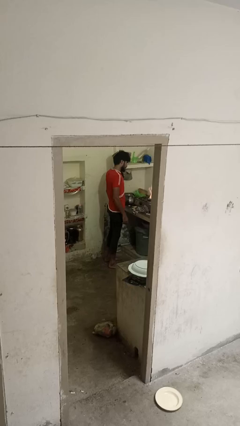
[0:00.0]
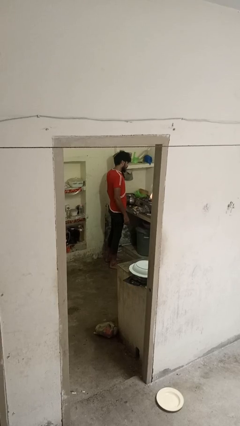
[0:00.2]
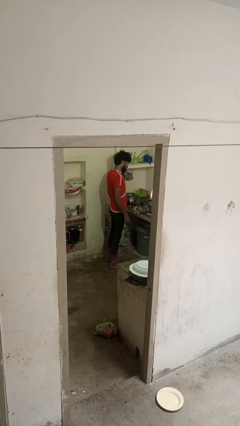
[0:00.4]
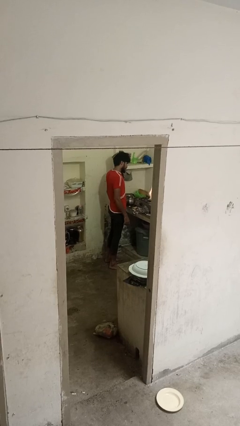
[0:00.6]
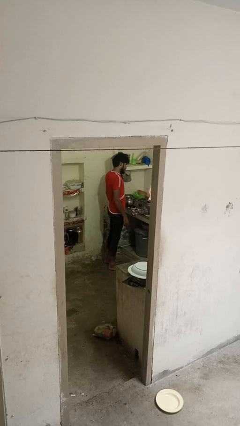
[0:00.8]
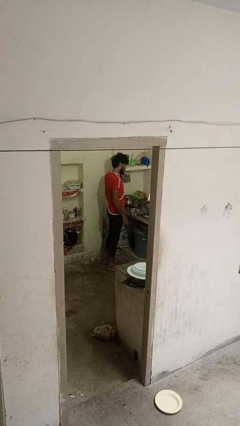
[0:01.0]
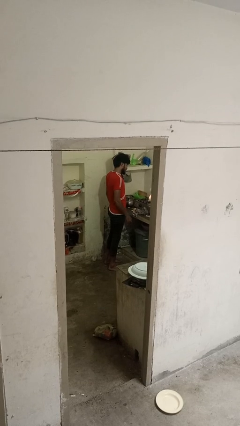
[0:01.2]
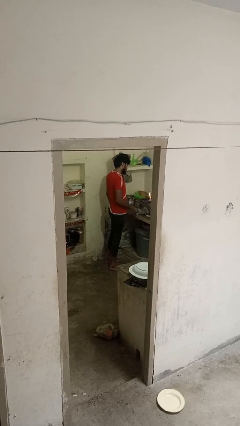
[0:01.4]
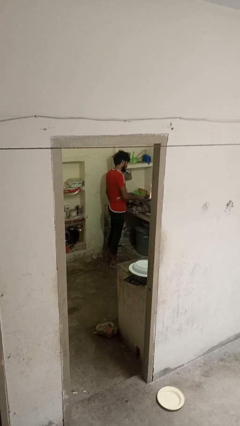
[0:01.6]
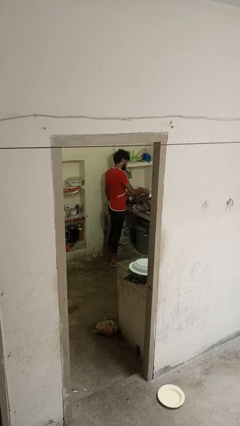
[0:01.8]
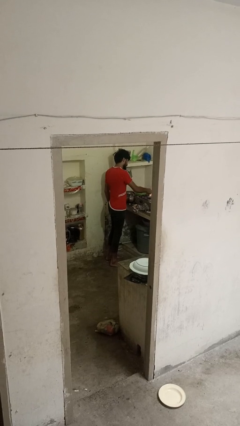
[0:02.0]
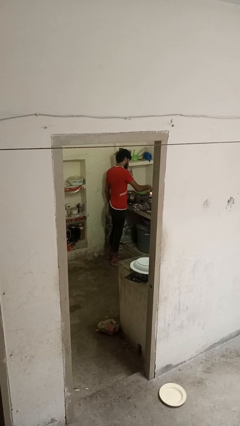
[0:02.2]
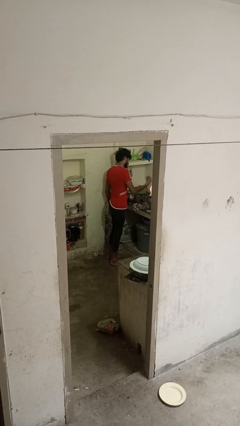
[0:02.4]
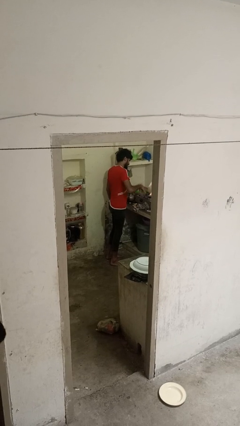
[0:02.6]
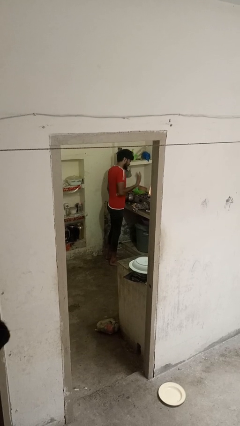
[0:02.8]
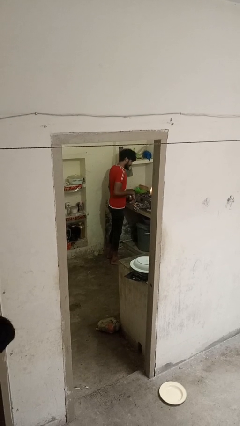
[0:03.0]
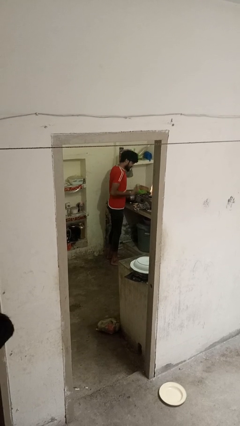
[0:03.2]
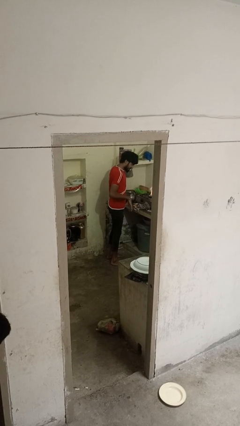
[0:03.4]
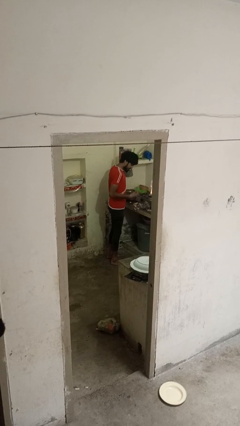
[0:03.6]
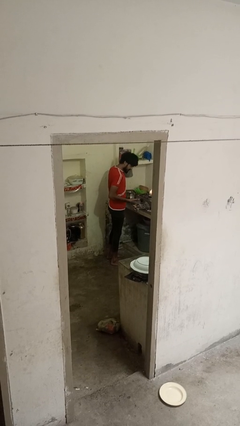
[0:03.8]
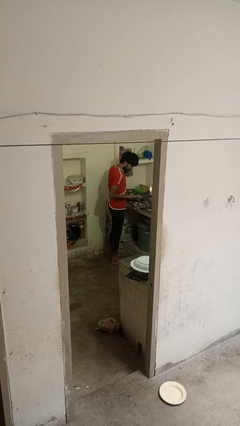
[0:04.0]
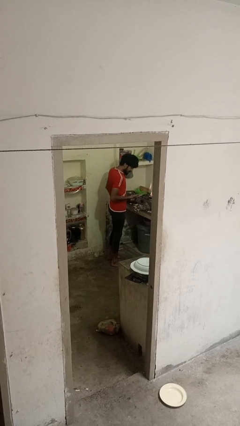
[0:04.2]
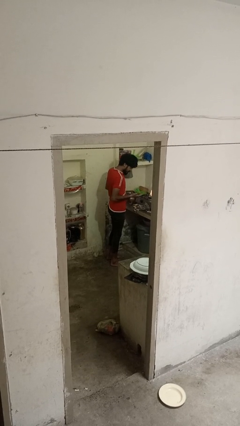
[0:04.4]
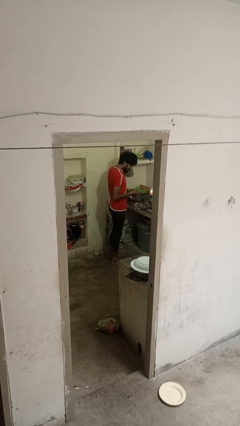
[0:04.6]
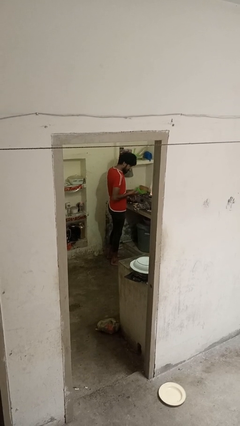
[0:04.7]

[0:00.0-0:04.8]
person burns hand

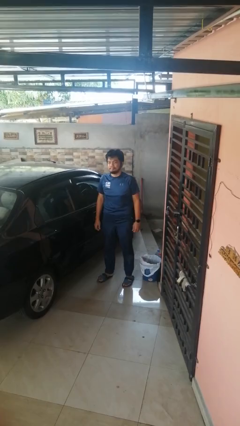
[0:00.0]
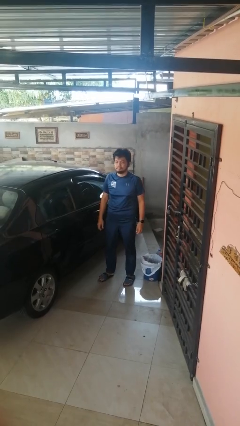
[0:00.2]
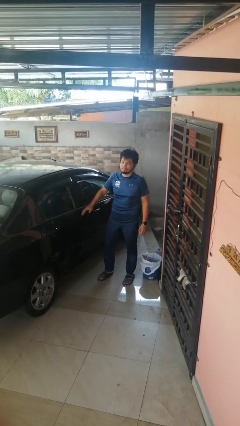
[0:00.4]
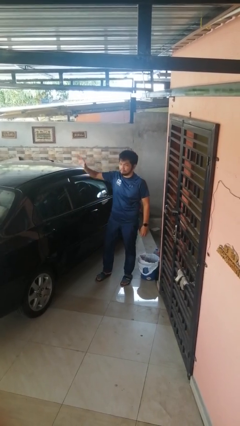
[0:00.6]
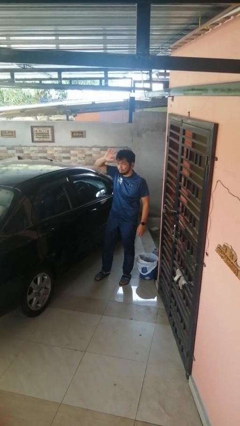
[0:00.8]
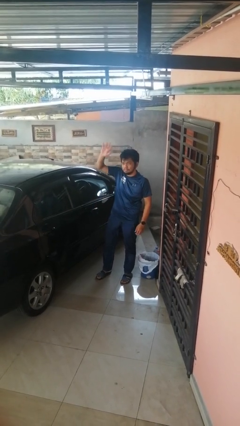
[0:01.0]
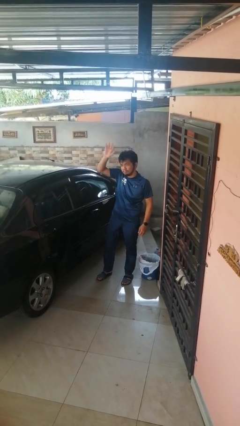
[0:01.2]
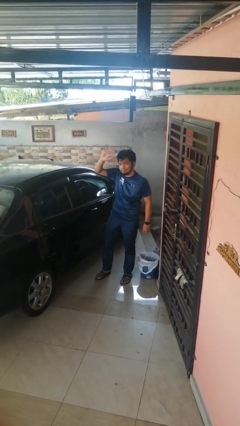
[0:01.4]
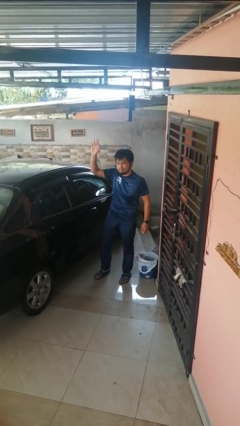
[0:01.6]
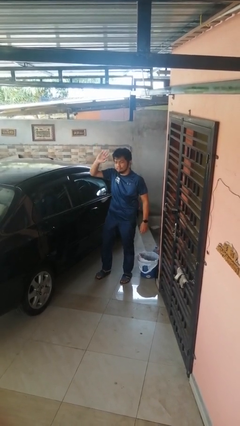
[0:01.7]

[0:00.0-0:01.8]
person waves at person

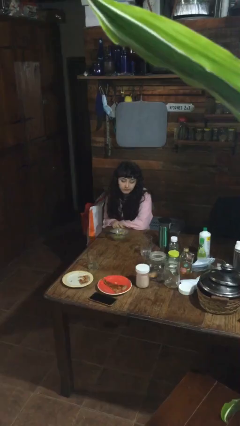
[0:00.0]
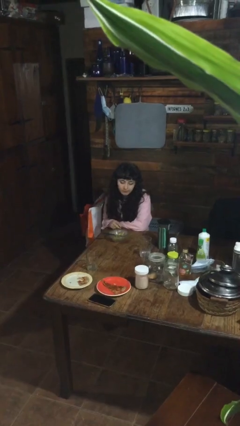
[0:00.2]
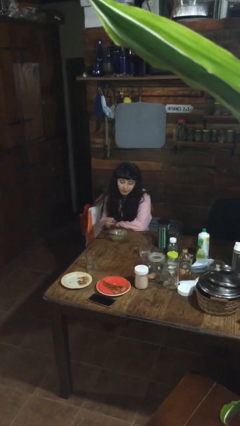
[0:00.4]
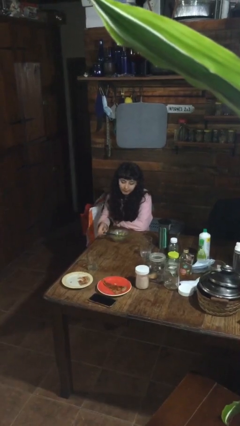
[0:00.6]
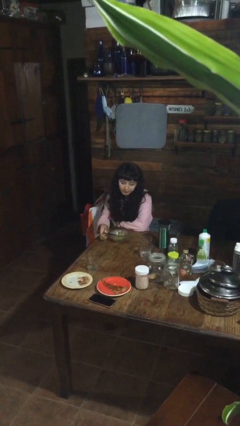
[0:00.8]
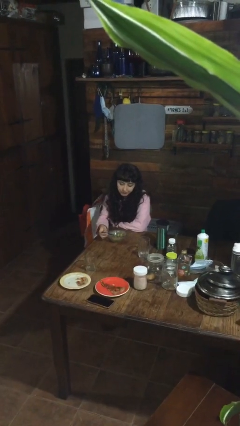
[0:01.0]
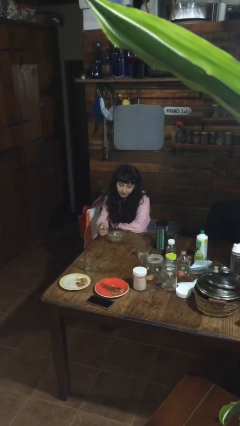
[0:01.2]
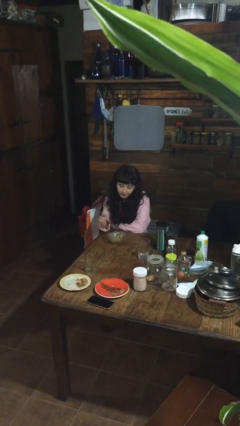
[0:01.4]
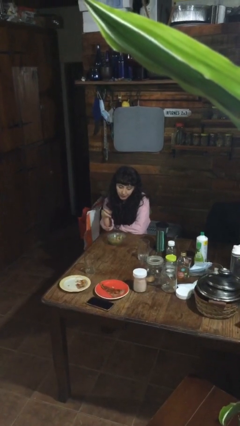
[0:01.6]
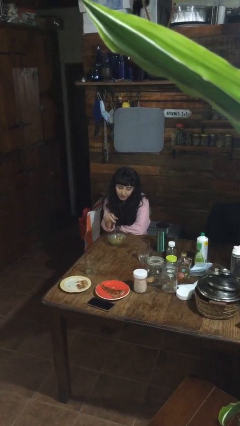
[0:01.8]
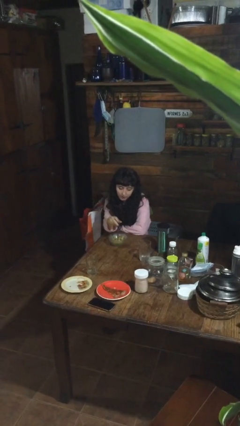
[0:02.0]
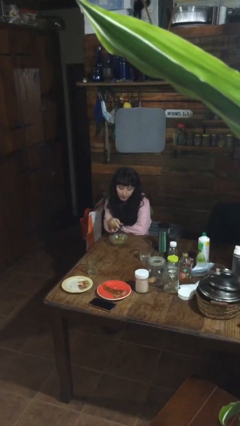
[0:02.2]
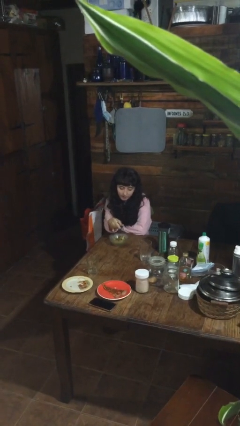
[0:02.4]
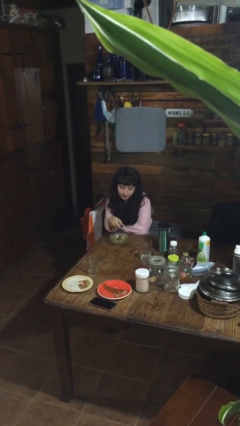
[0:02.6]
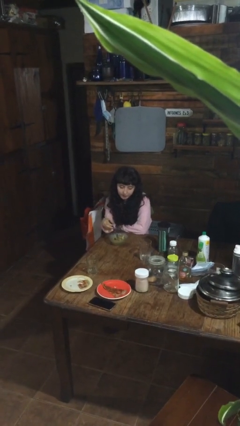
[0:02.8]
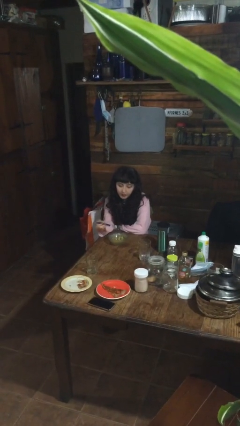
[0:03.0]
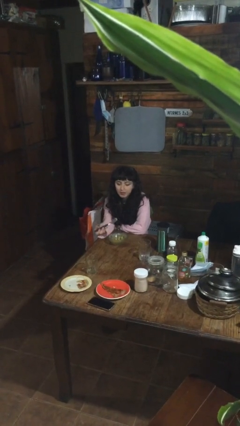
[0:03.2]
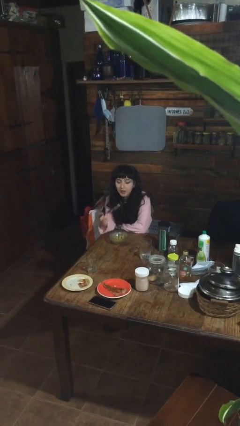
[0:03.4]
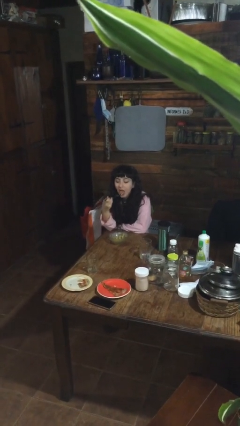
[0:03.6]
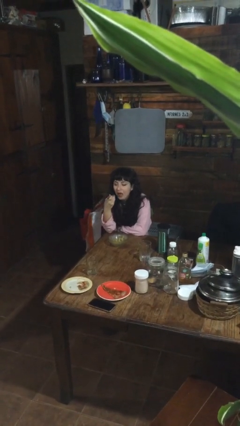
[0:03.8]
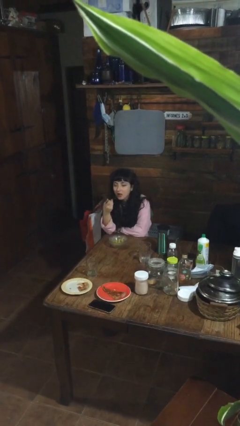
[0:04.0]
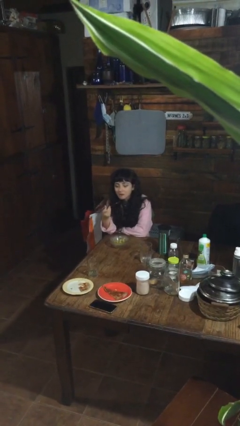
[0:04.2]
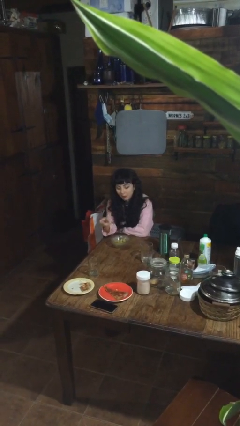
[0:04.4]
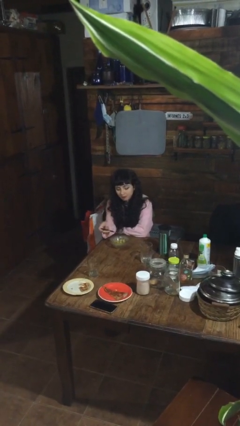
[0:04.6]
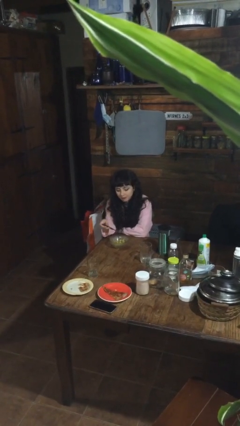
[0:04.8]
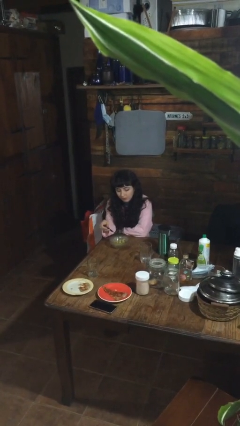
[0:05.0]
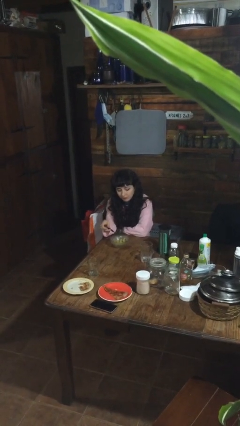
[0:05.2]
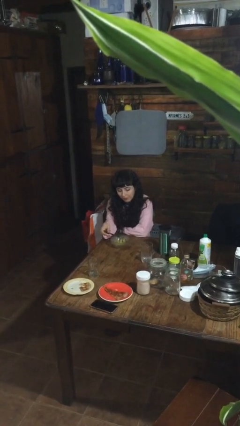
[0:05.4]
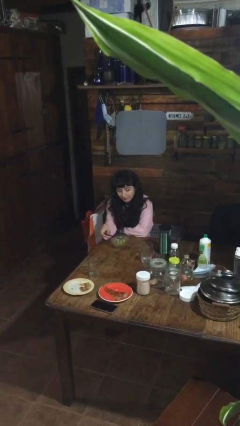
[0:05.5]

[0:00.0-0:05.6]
person eats with utensil

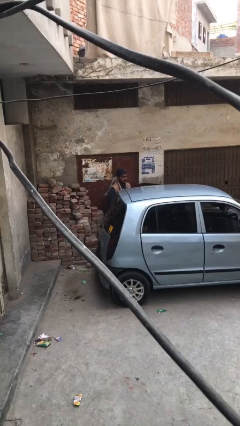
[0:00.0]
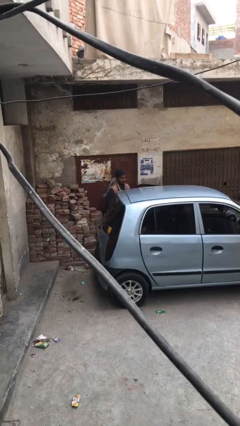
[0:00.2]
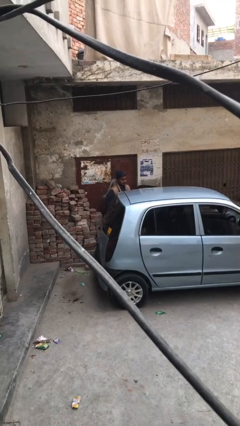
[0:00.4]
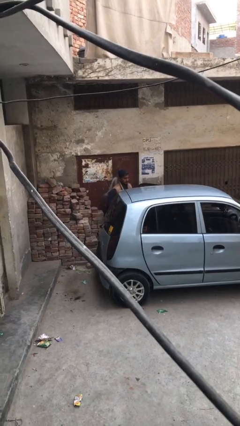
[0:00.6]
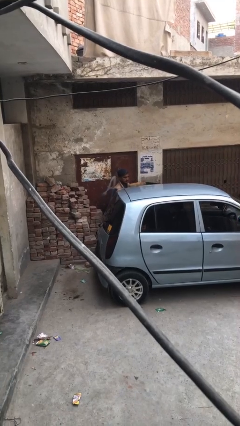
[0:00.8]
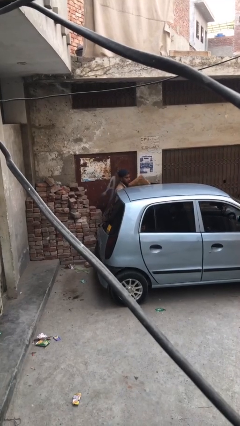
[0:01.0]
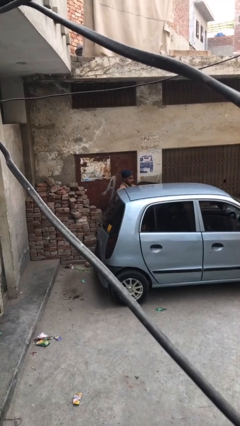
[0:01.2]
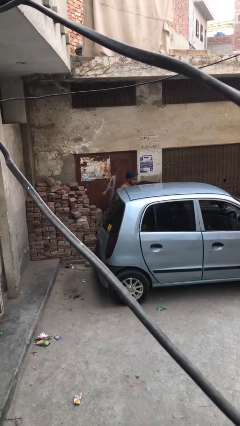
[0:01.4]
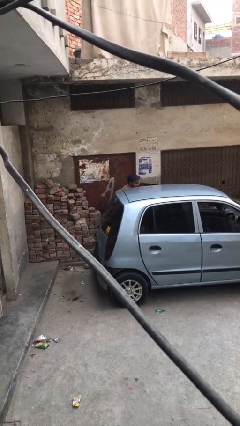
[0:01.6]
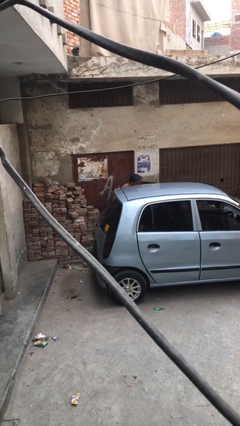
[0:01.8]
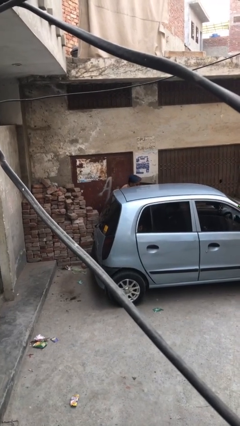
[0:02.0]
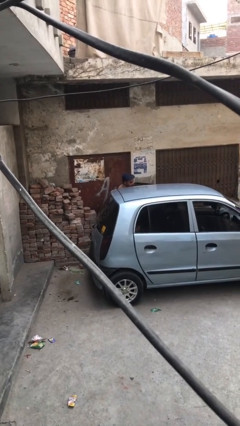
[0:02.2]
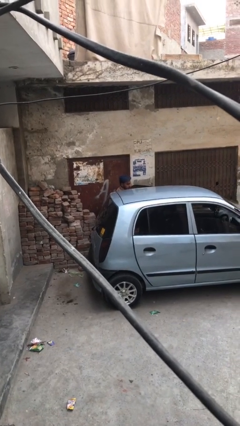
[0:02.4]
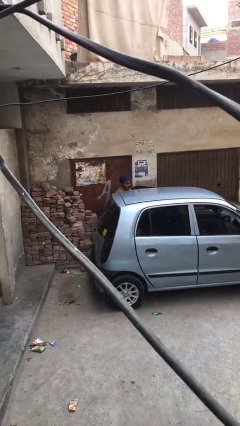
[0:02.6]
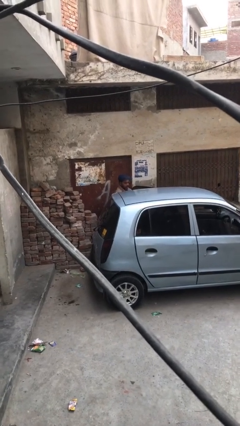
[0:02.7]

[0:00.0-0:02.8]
person loads car

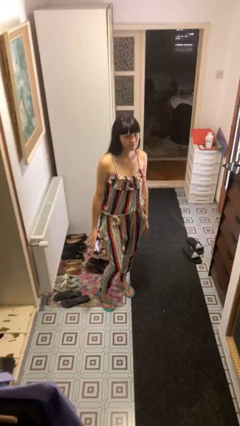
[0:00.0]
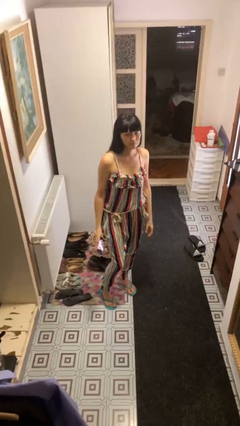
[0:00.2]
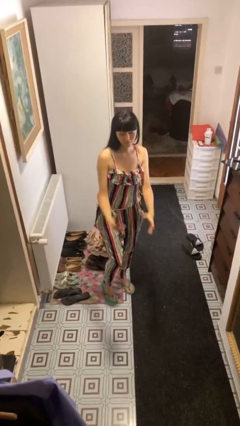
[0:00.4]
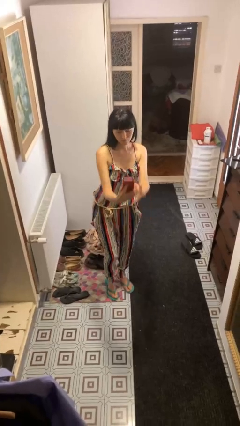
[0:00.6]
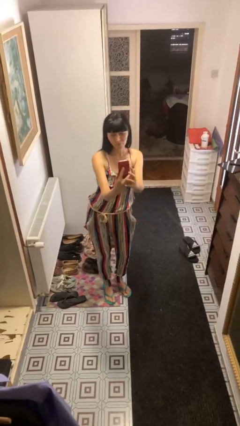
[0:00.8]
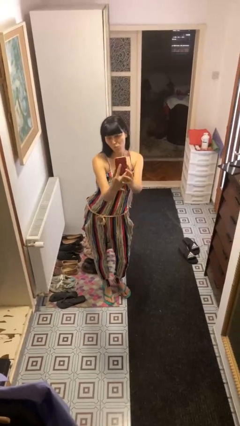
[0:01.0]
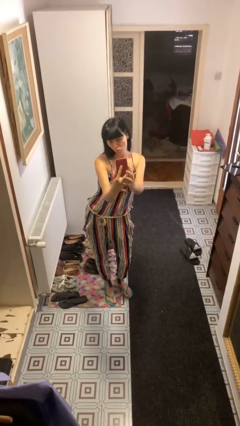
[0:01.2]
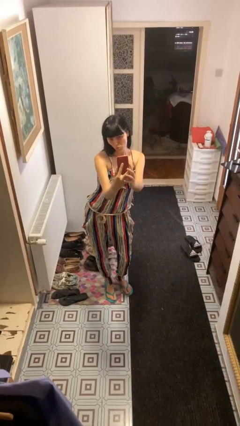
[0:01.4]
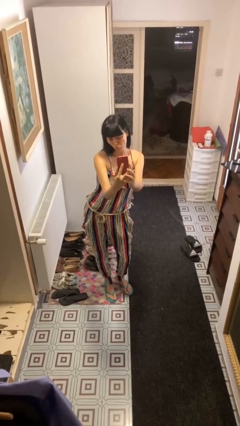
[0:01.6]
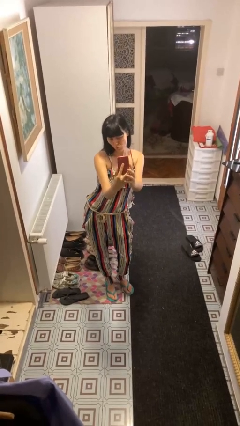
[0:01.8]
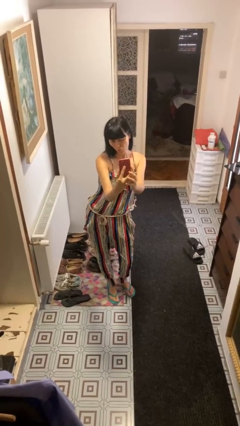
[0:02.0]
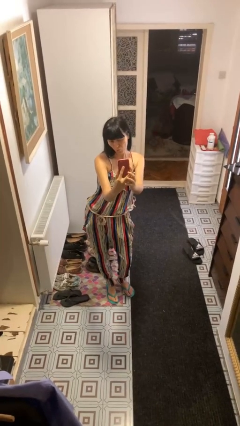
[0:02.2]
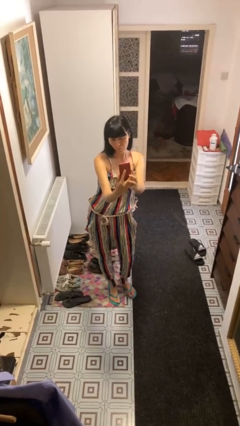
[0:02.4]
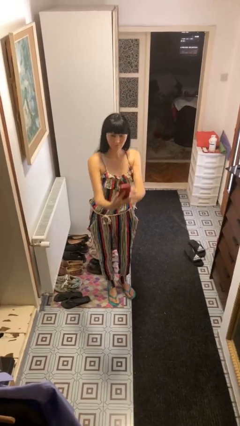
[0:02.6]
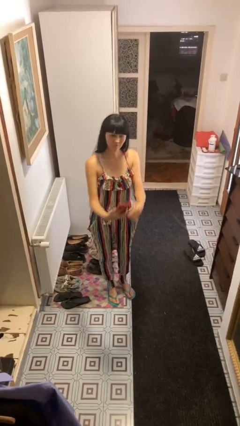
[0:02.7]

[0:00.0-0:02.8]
person takes selfie
